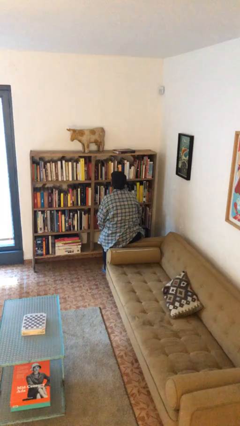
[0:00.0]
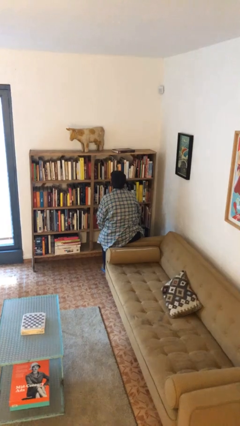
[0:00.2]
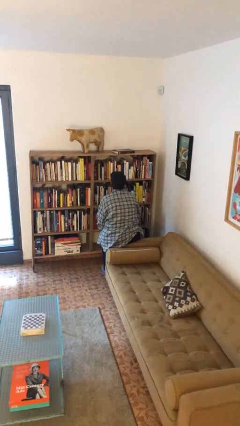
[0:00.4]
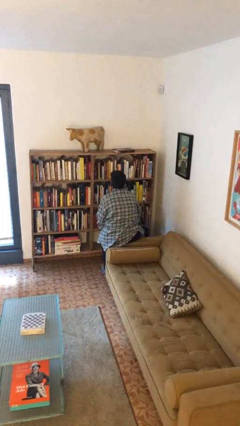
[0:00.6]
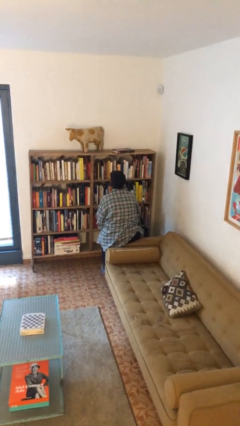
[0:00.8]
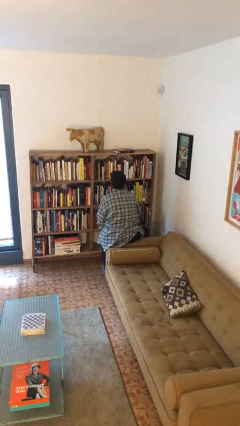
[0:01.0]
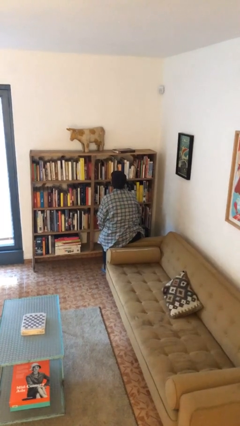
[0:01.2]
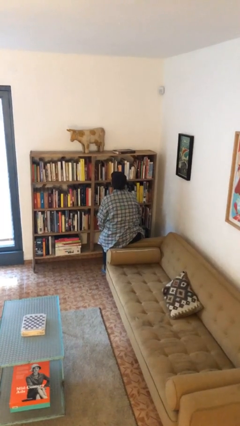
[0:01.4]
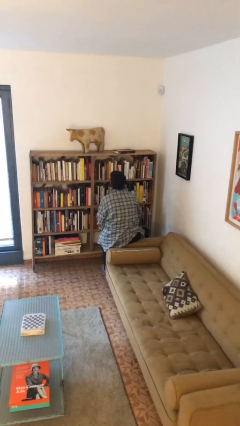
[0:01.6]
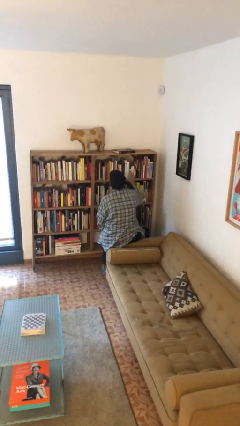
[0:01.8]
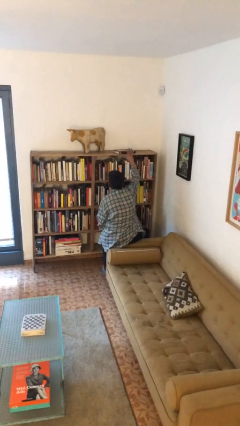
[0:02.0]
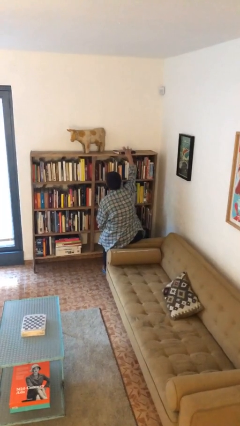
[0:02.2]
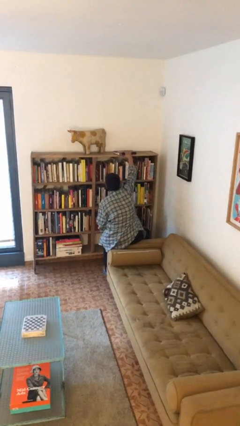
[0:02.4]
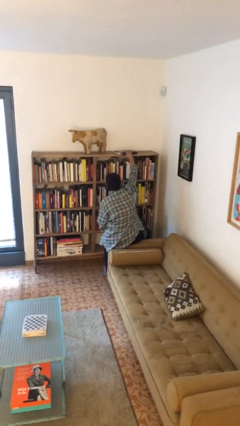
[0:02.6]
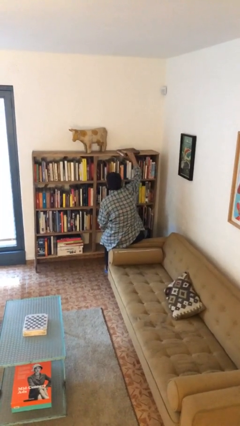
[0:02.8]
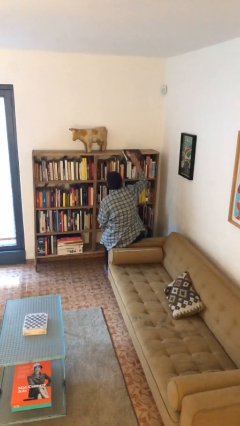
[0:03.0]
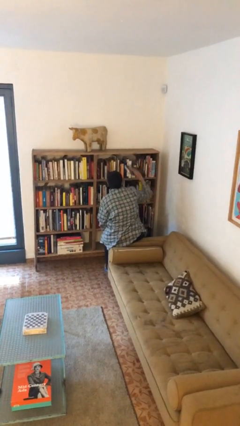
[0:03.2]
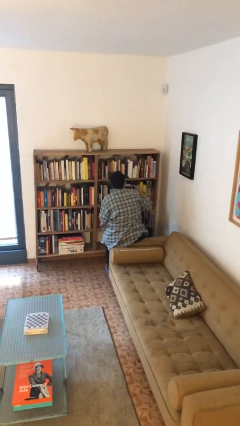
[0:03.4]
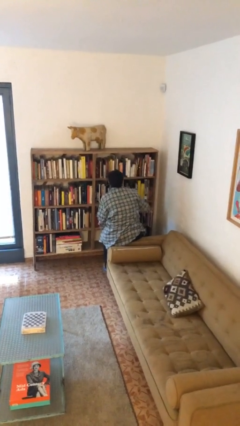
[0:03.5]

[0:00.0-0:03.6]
person picks up object from shelf

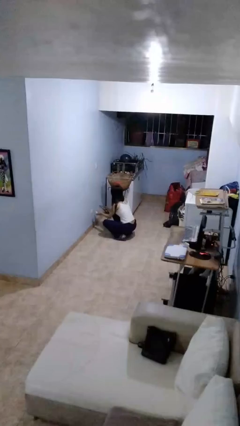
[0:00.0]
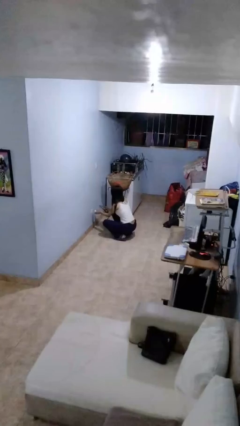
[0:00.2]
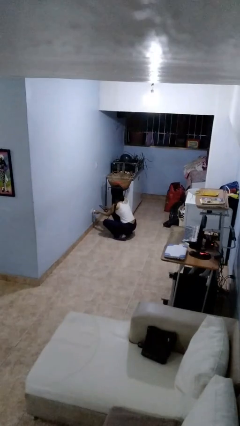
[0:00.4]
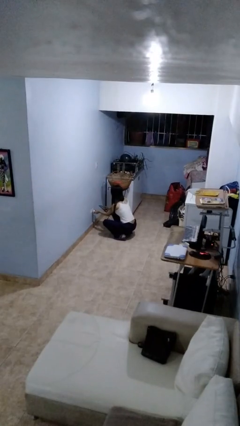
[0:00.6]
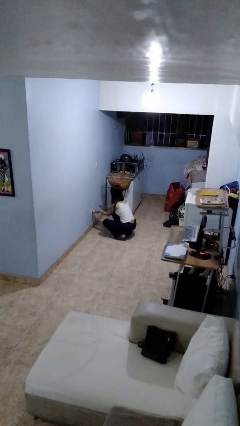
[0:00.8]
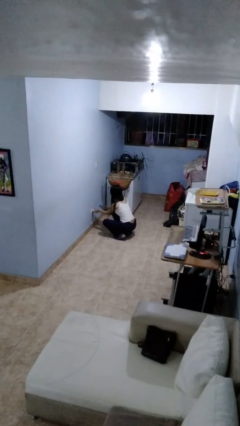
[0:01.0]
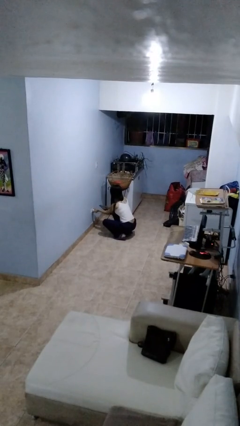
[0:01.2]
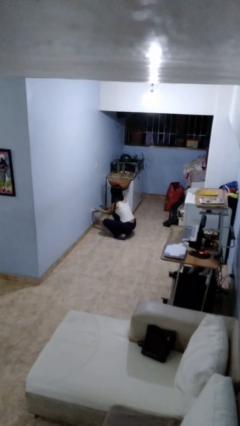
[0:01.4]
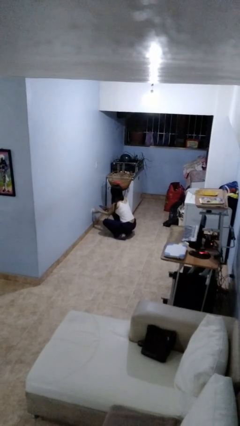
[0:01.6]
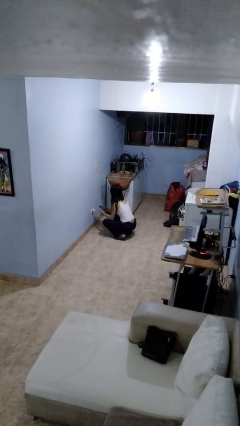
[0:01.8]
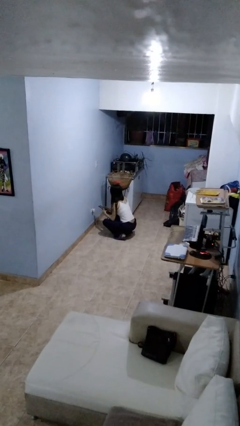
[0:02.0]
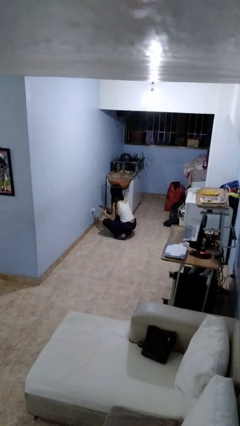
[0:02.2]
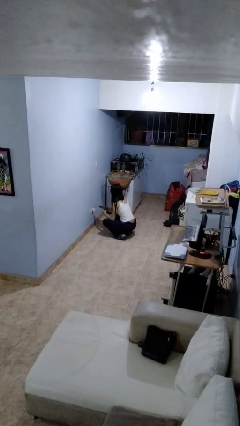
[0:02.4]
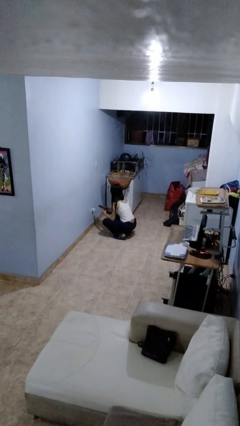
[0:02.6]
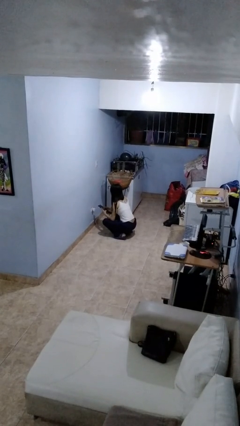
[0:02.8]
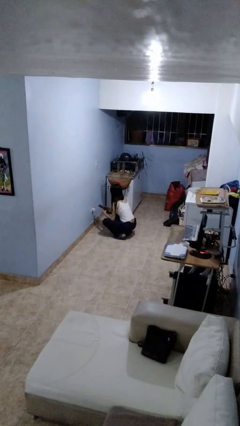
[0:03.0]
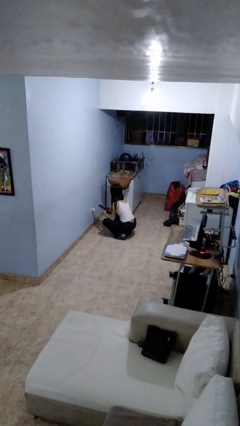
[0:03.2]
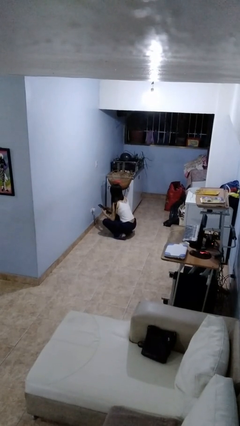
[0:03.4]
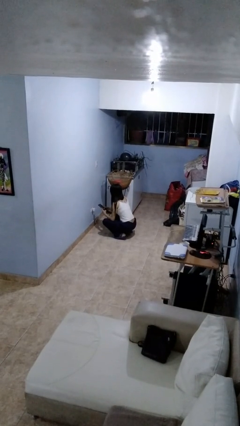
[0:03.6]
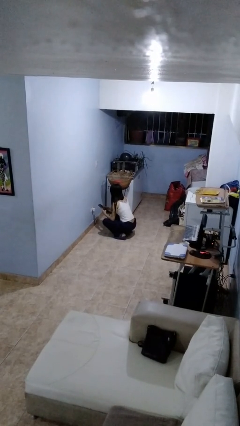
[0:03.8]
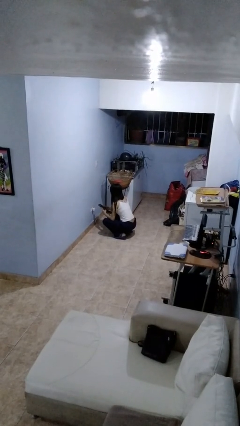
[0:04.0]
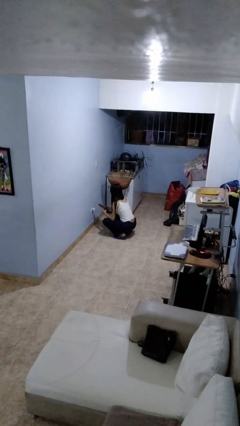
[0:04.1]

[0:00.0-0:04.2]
person plugs into electrical socket

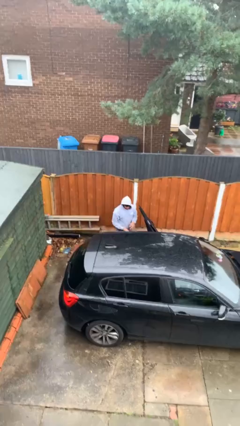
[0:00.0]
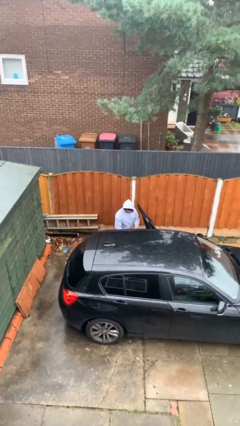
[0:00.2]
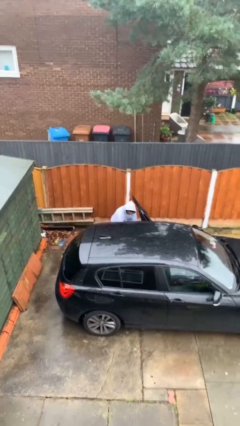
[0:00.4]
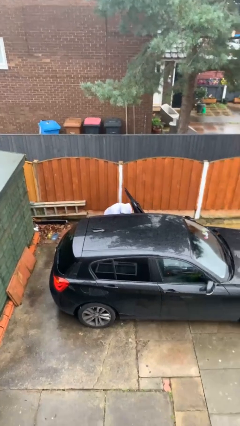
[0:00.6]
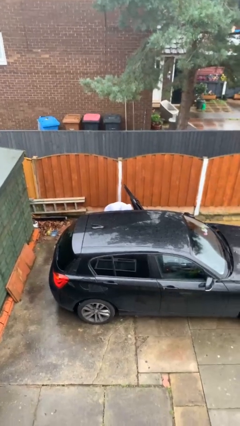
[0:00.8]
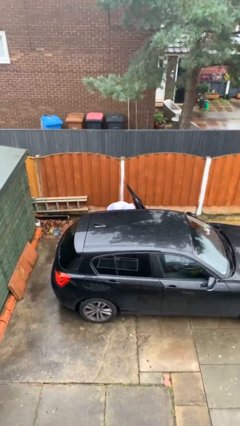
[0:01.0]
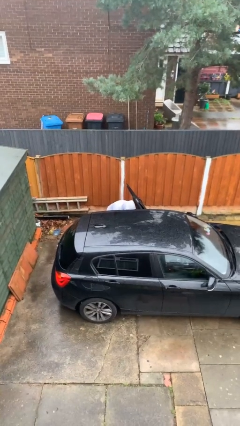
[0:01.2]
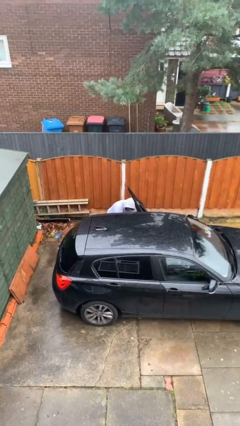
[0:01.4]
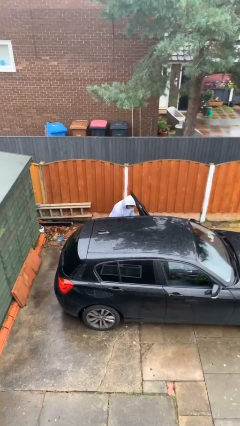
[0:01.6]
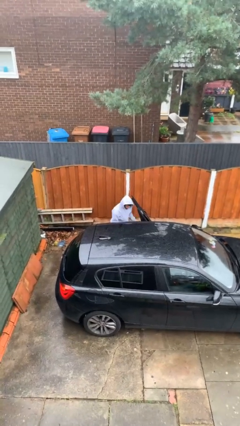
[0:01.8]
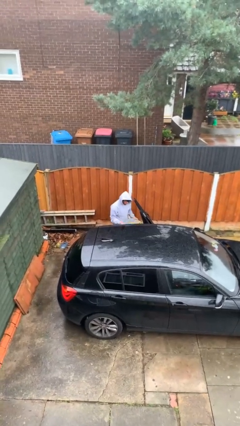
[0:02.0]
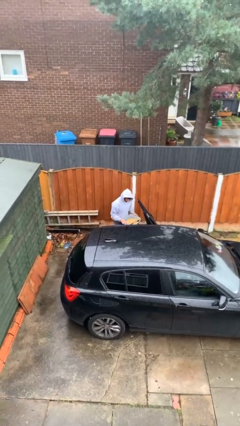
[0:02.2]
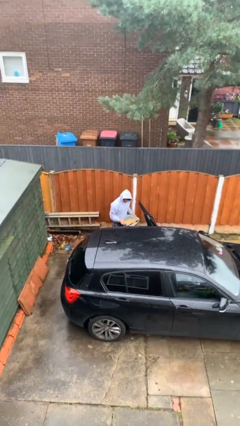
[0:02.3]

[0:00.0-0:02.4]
person unloads car

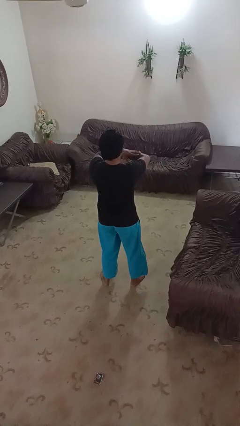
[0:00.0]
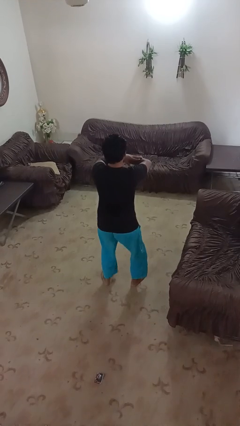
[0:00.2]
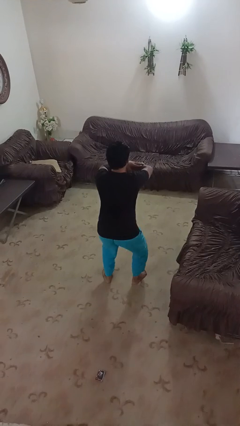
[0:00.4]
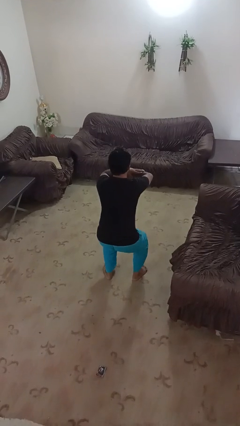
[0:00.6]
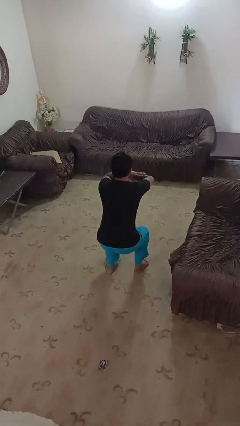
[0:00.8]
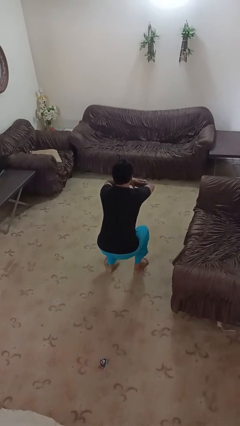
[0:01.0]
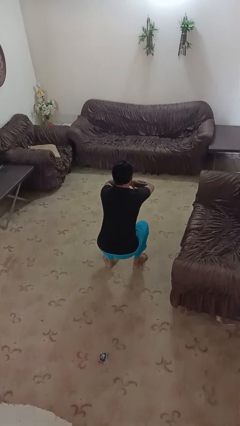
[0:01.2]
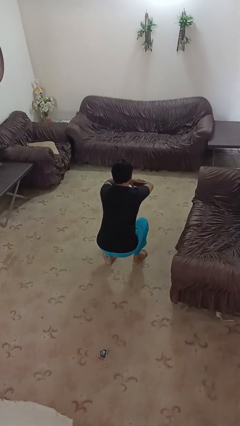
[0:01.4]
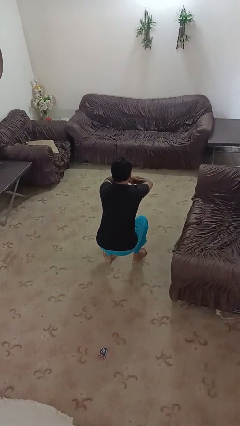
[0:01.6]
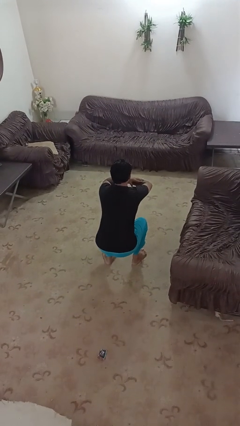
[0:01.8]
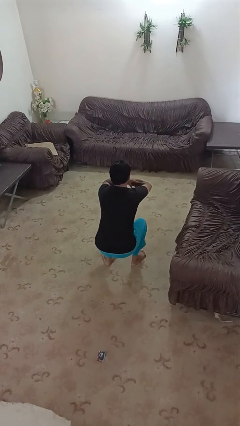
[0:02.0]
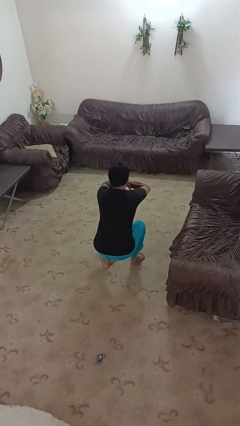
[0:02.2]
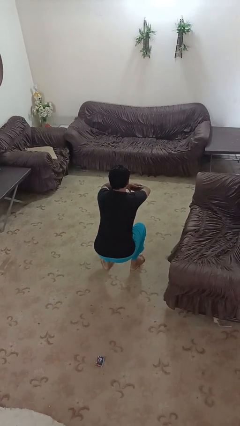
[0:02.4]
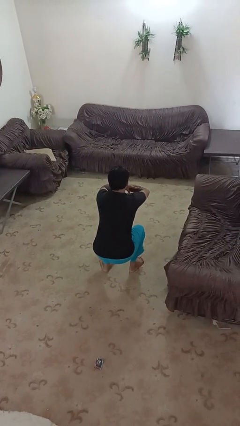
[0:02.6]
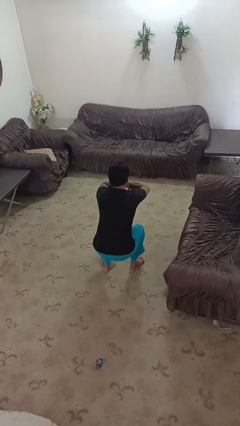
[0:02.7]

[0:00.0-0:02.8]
person squats

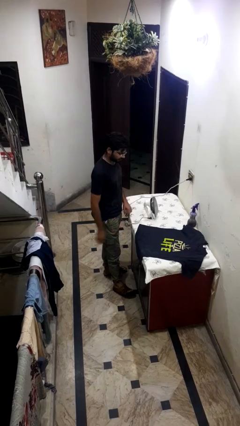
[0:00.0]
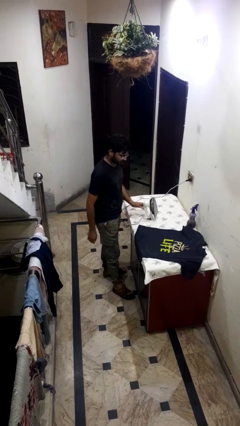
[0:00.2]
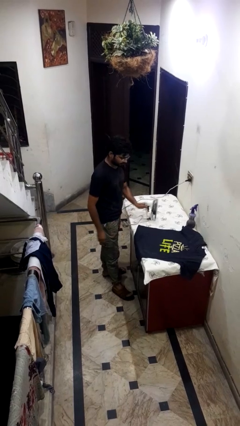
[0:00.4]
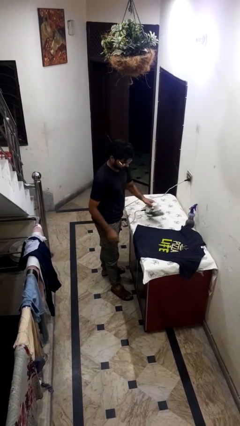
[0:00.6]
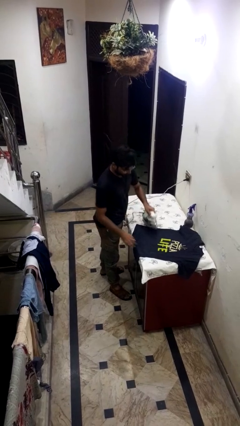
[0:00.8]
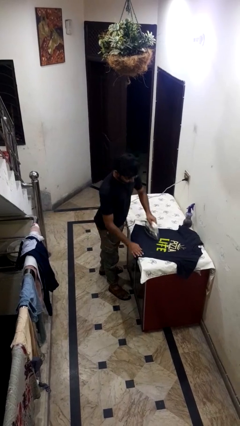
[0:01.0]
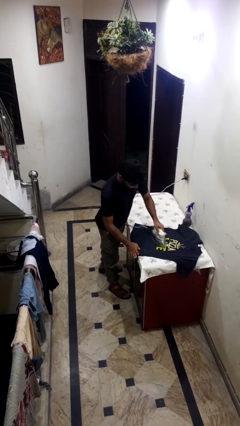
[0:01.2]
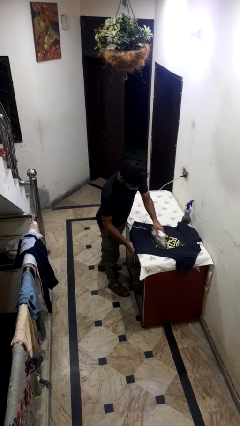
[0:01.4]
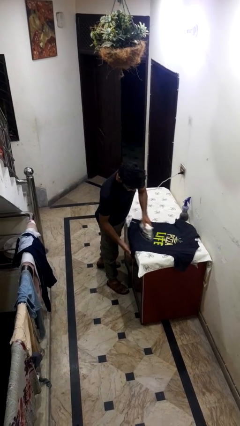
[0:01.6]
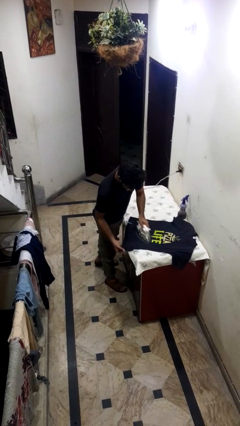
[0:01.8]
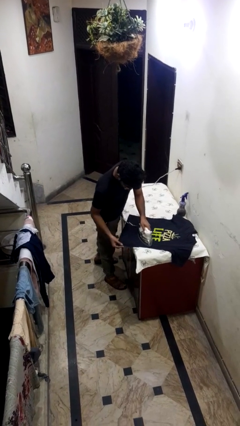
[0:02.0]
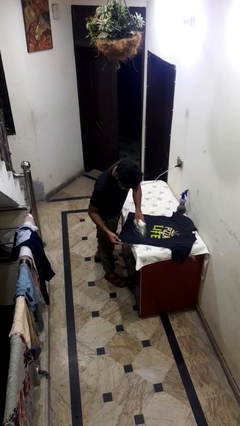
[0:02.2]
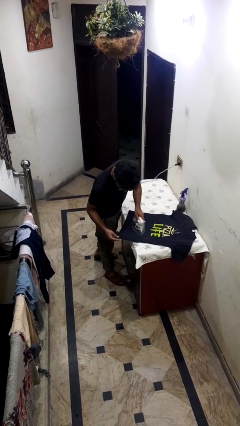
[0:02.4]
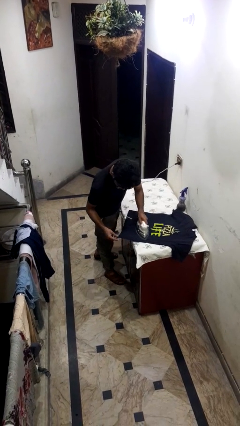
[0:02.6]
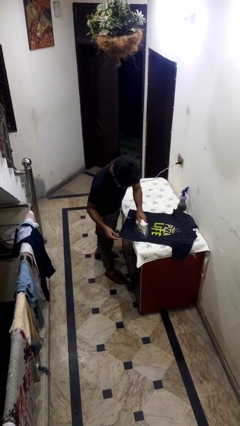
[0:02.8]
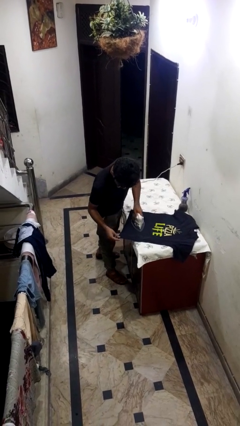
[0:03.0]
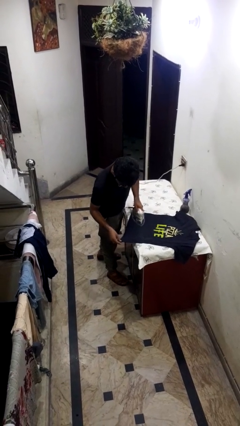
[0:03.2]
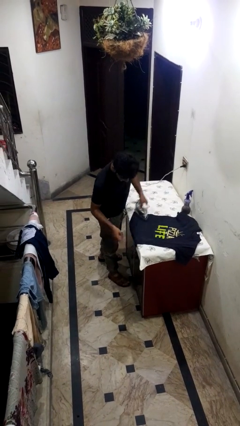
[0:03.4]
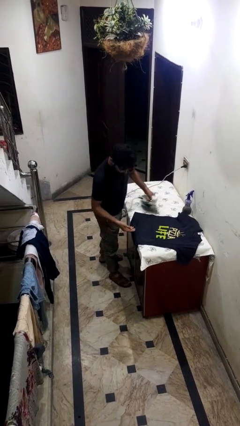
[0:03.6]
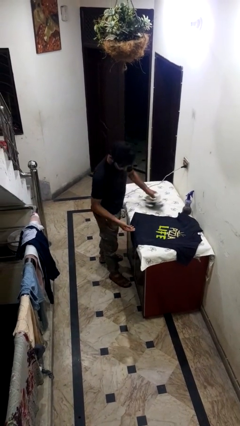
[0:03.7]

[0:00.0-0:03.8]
person irons clothes

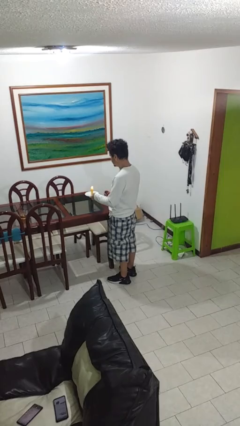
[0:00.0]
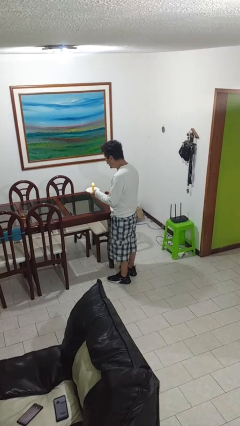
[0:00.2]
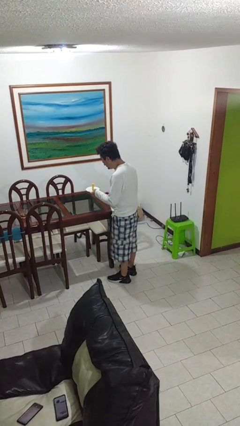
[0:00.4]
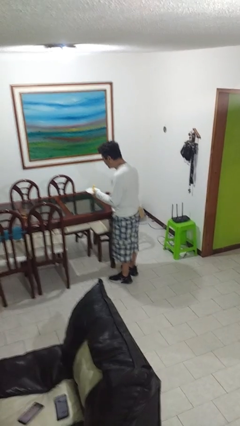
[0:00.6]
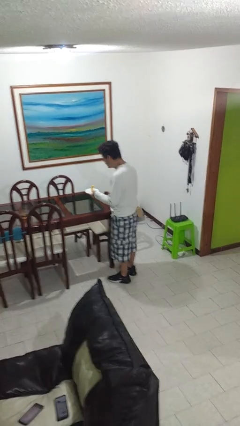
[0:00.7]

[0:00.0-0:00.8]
person extinguishes candle
